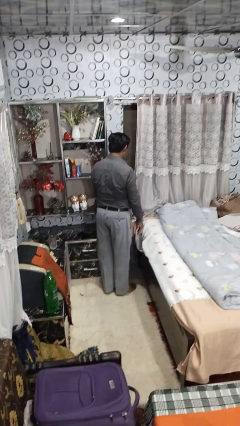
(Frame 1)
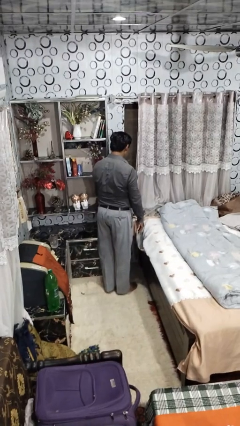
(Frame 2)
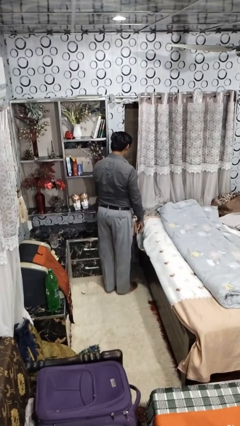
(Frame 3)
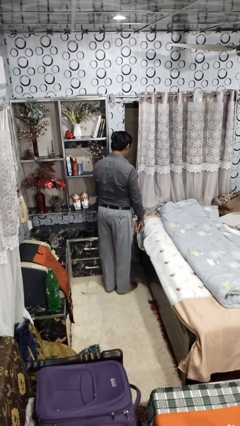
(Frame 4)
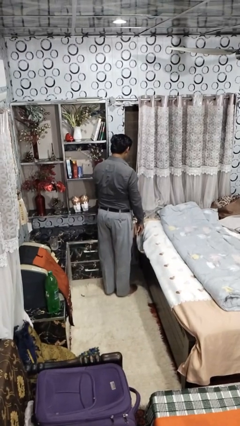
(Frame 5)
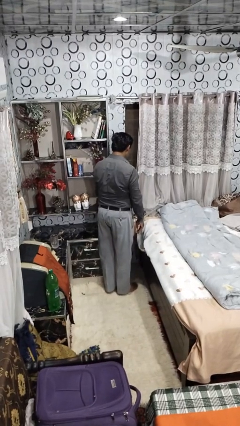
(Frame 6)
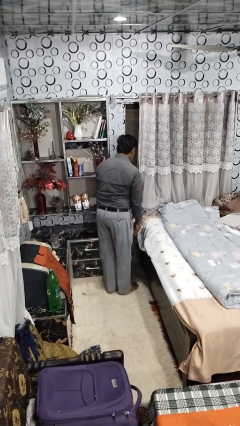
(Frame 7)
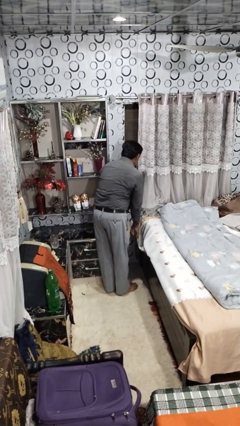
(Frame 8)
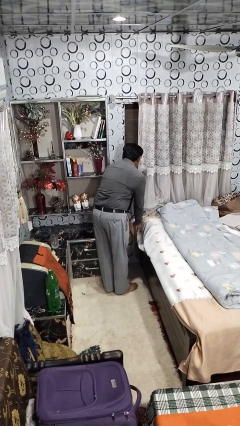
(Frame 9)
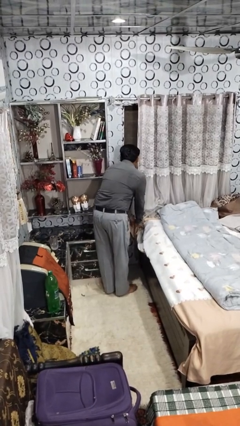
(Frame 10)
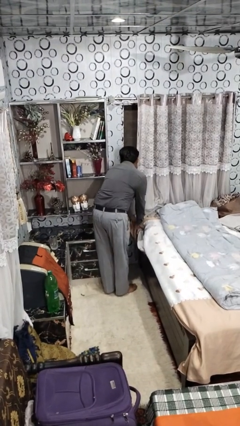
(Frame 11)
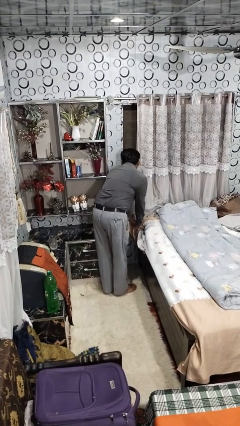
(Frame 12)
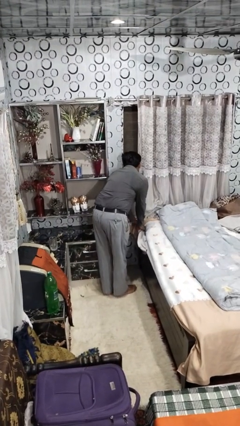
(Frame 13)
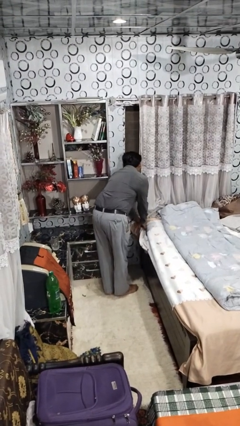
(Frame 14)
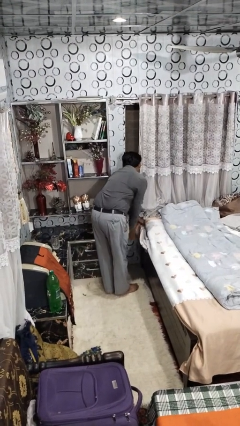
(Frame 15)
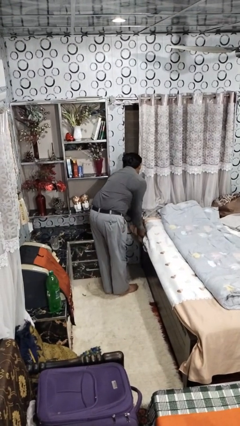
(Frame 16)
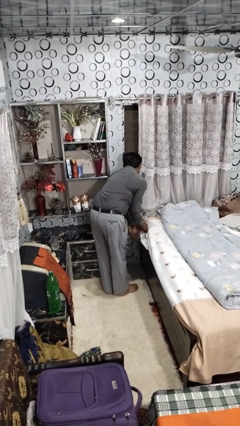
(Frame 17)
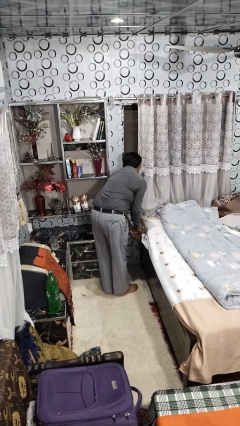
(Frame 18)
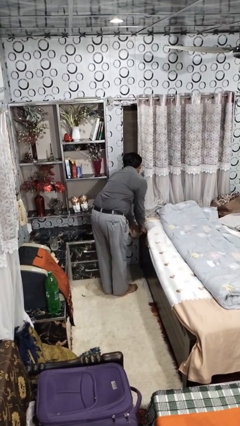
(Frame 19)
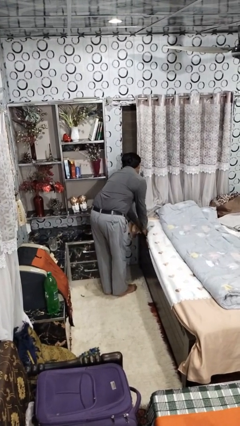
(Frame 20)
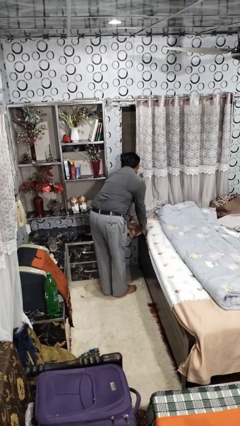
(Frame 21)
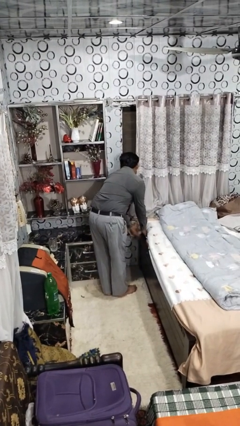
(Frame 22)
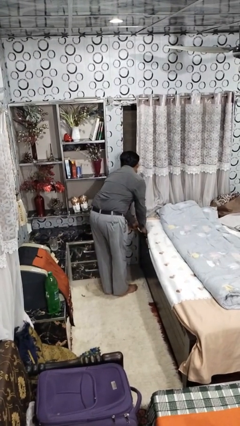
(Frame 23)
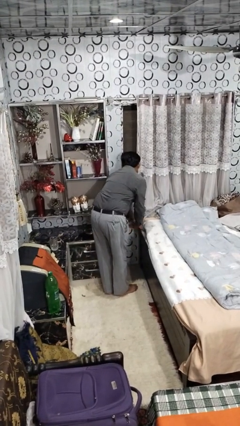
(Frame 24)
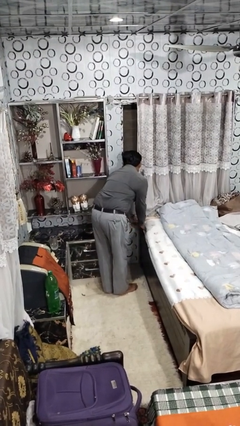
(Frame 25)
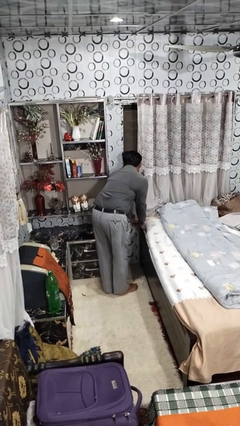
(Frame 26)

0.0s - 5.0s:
person makes bed

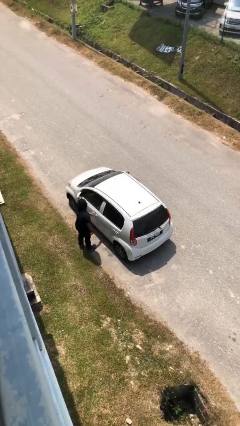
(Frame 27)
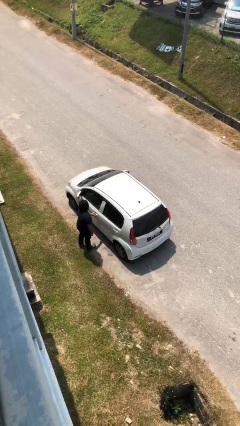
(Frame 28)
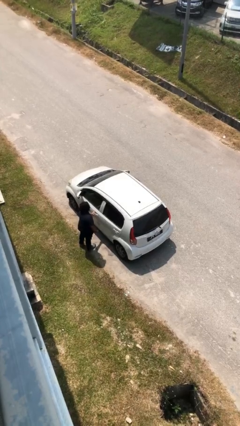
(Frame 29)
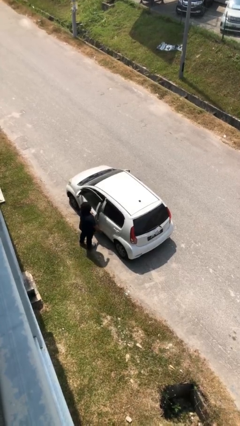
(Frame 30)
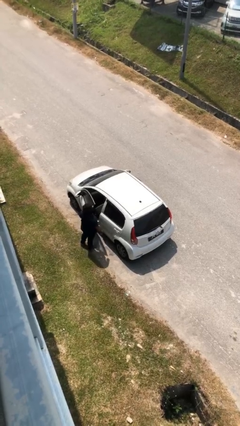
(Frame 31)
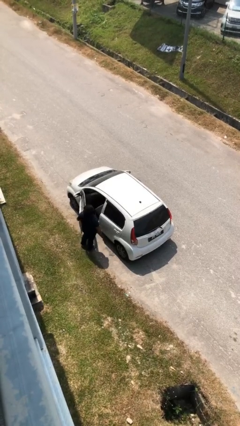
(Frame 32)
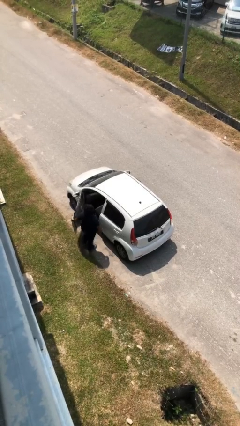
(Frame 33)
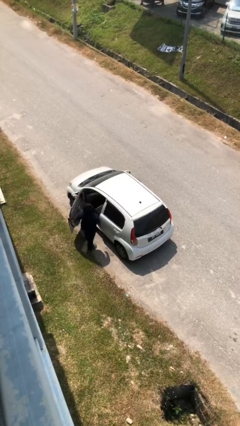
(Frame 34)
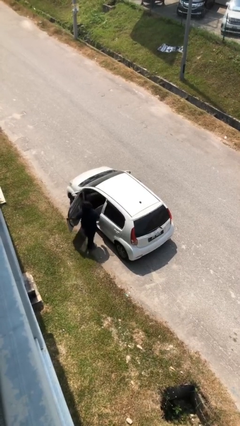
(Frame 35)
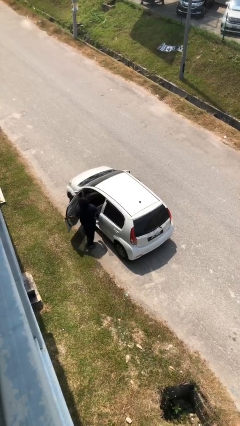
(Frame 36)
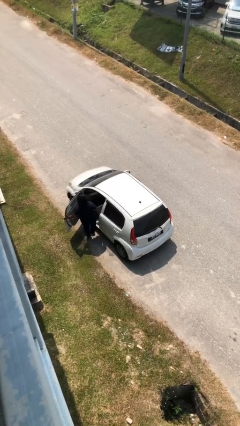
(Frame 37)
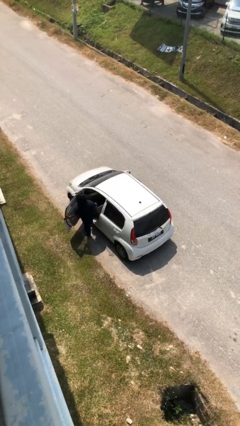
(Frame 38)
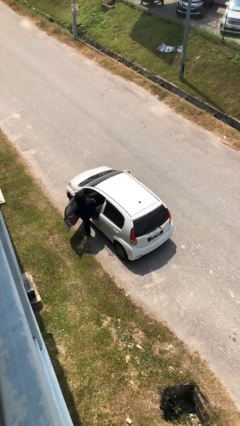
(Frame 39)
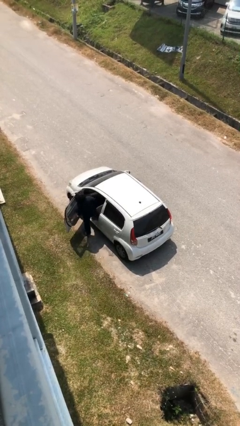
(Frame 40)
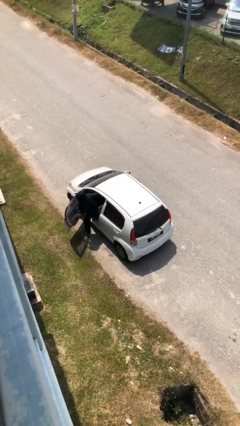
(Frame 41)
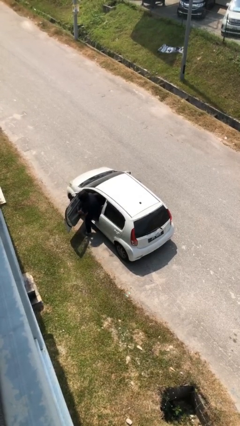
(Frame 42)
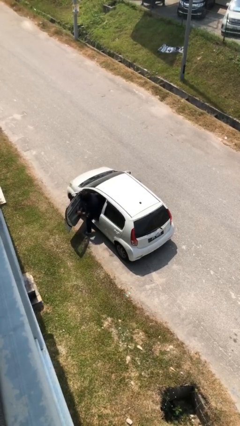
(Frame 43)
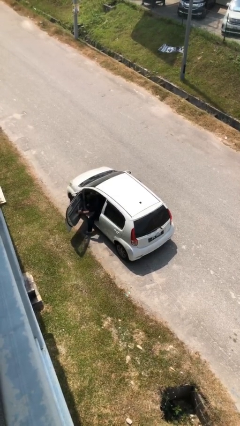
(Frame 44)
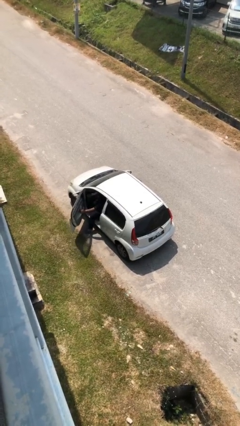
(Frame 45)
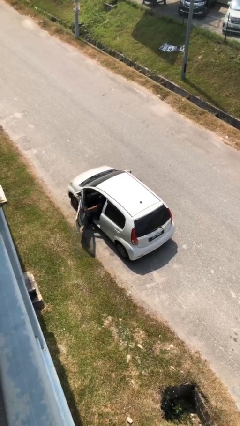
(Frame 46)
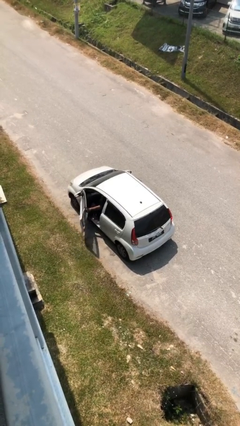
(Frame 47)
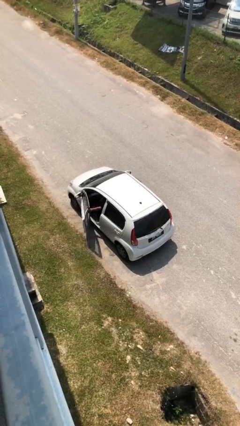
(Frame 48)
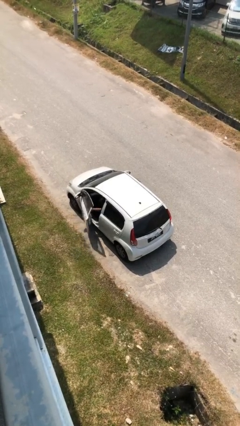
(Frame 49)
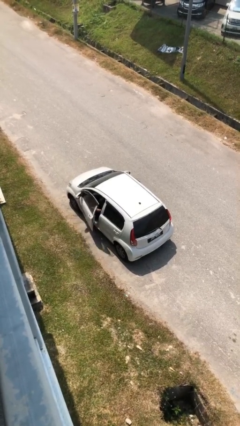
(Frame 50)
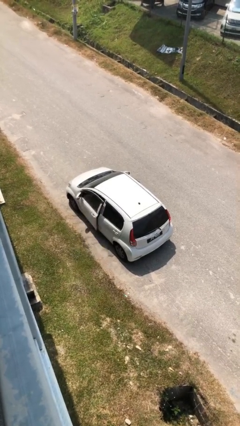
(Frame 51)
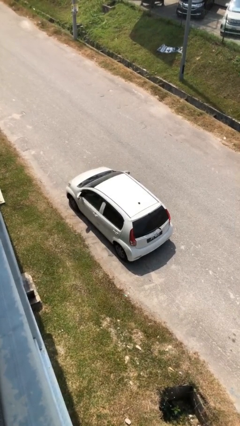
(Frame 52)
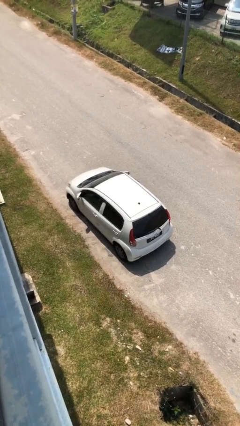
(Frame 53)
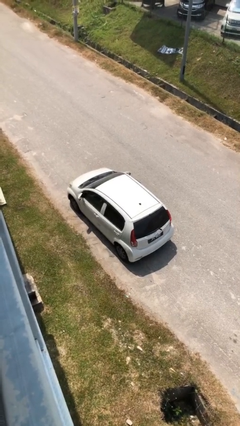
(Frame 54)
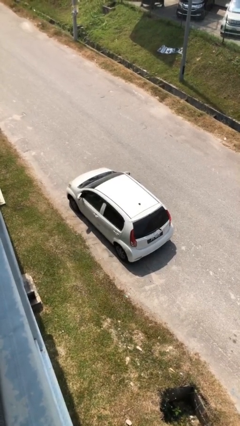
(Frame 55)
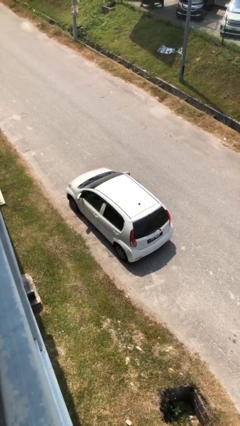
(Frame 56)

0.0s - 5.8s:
car picks up person

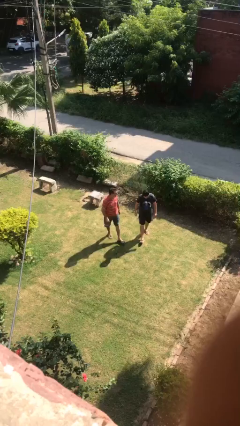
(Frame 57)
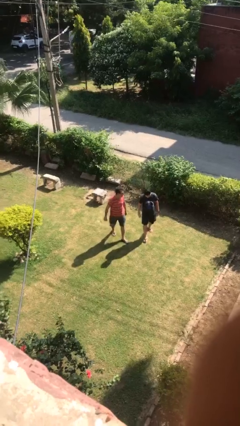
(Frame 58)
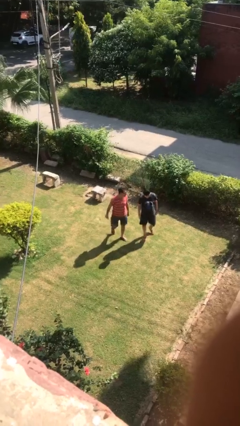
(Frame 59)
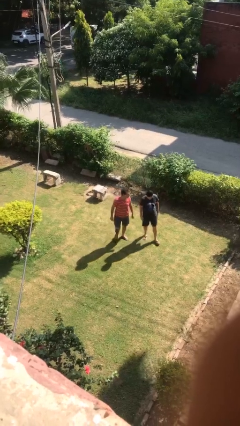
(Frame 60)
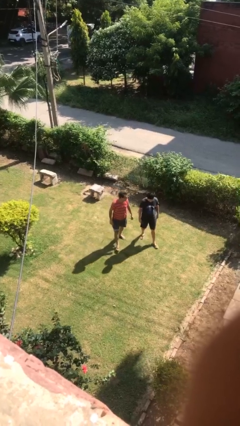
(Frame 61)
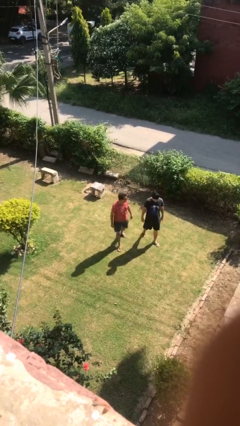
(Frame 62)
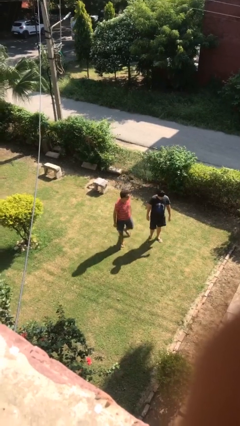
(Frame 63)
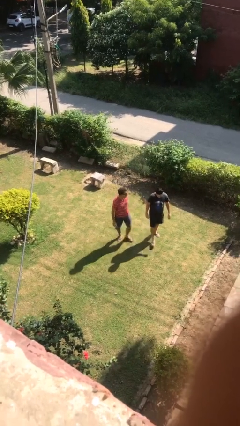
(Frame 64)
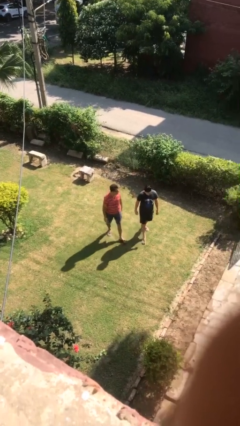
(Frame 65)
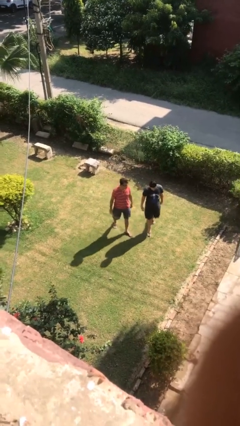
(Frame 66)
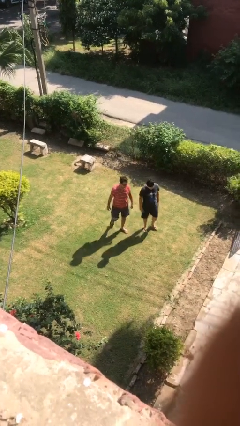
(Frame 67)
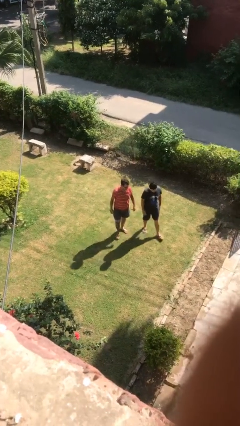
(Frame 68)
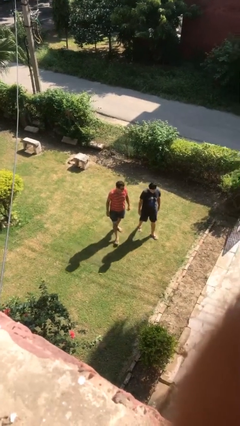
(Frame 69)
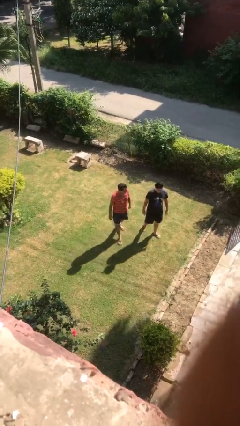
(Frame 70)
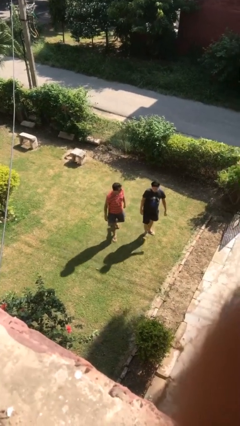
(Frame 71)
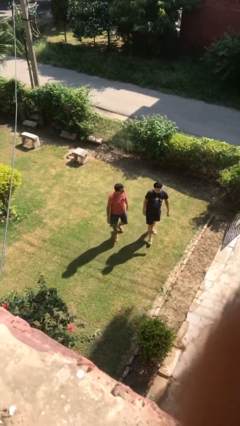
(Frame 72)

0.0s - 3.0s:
person talks to person

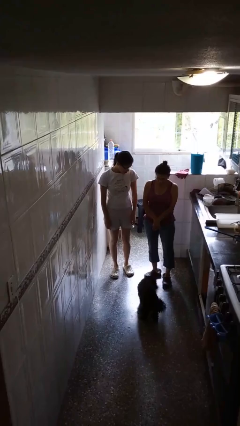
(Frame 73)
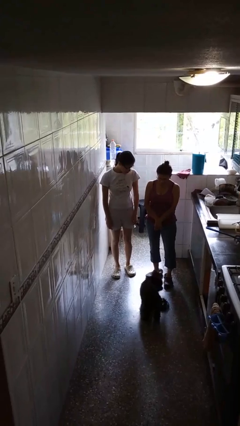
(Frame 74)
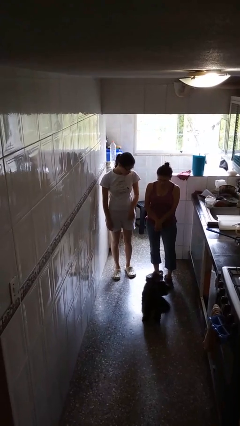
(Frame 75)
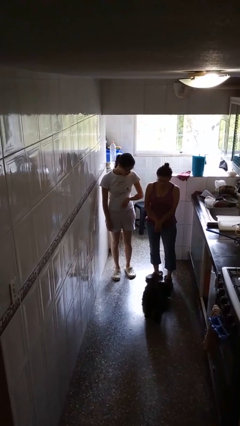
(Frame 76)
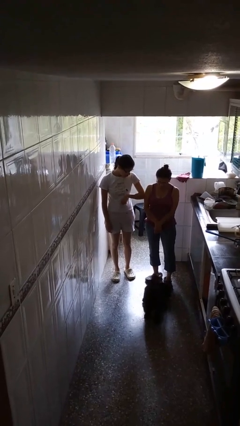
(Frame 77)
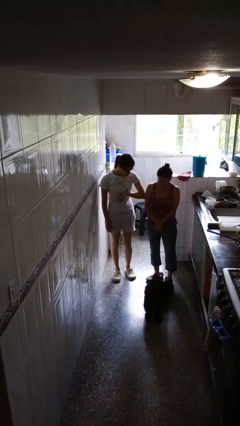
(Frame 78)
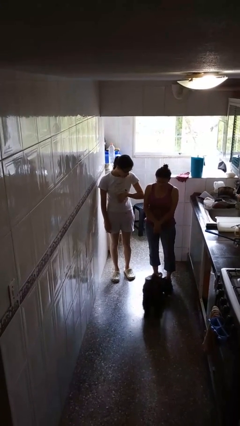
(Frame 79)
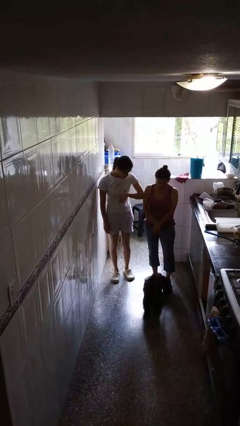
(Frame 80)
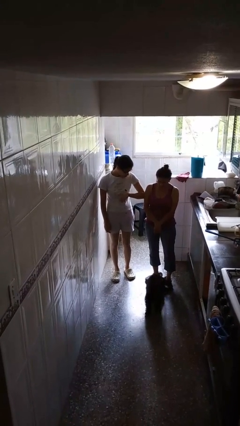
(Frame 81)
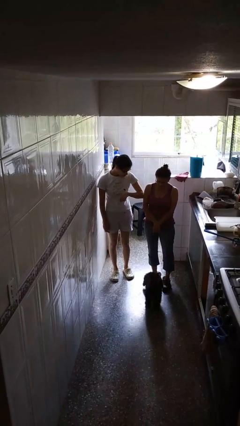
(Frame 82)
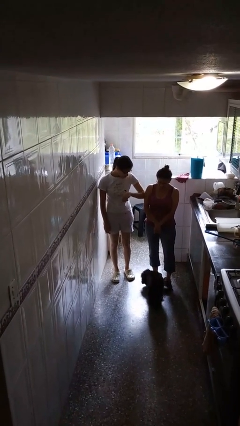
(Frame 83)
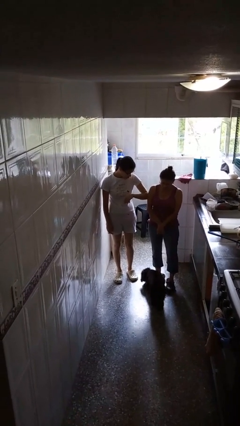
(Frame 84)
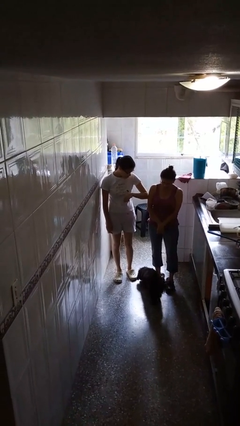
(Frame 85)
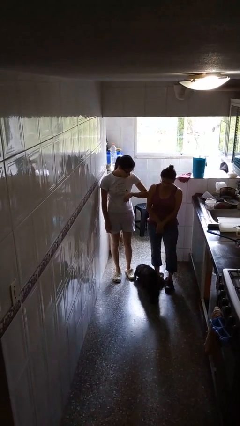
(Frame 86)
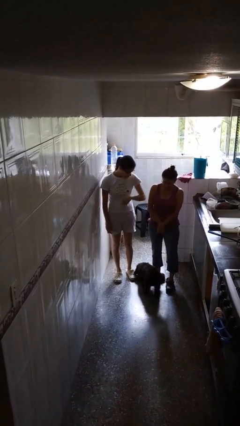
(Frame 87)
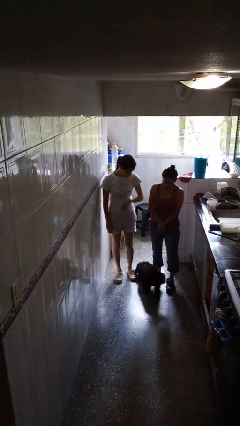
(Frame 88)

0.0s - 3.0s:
person nudges person with elbow

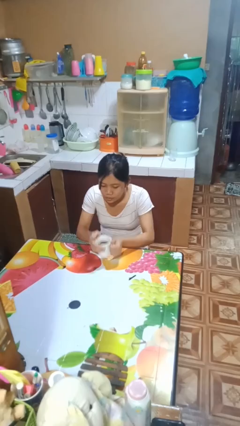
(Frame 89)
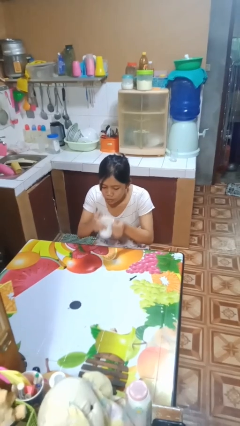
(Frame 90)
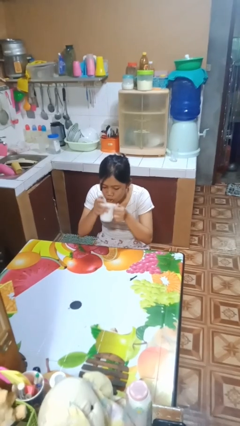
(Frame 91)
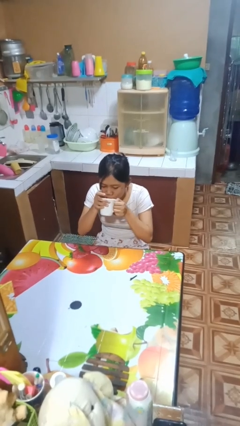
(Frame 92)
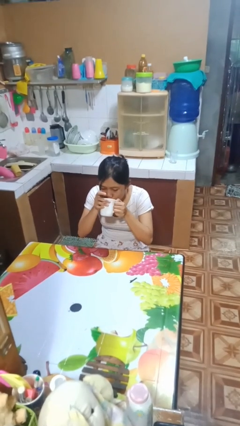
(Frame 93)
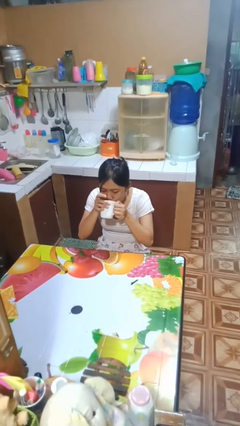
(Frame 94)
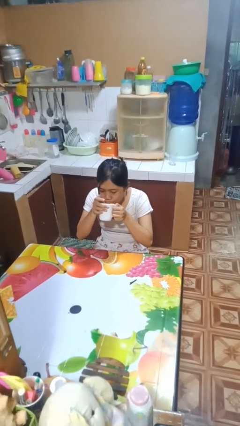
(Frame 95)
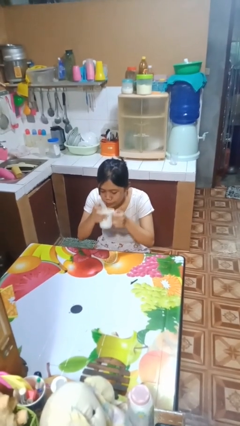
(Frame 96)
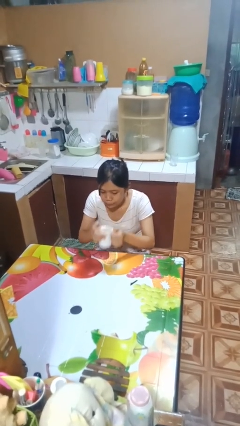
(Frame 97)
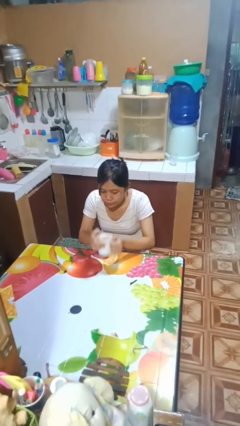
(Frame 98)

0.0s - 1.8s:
person drinks from mug
